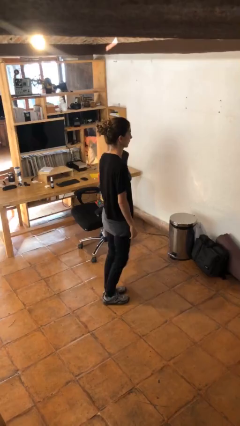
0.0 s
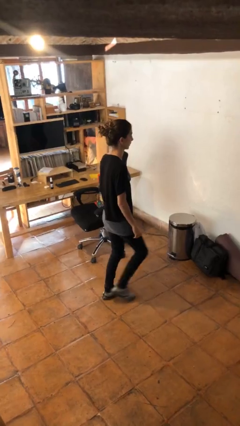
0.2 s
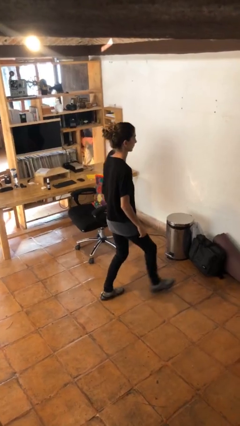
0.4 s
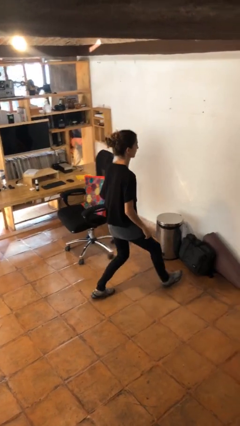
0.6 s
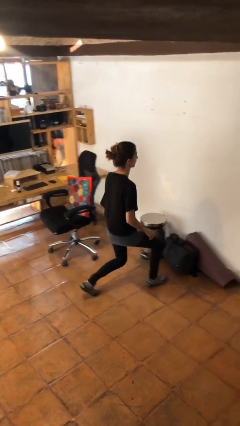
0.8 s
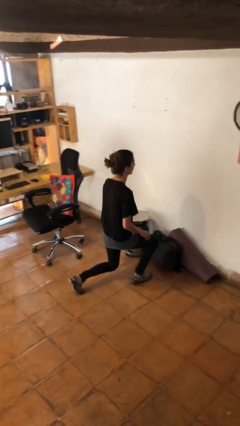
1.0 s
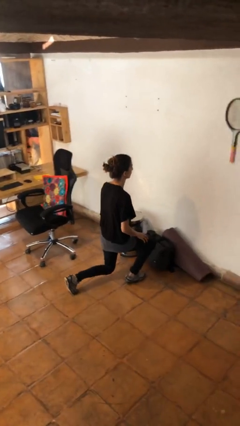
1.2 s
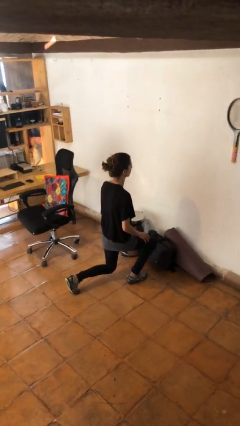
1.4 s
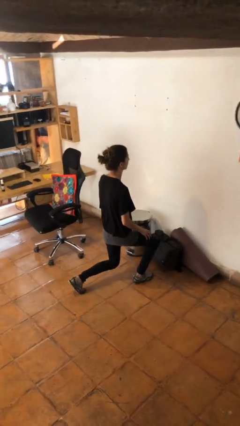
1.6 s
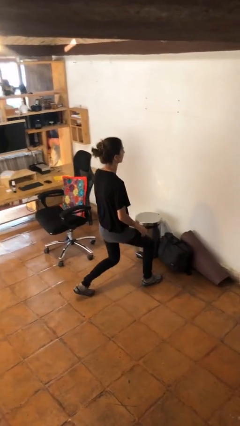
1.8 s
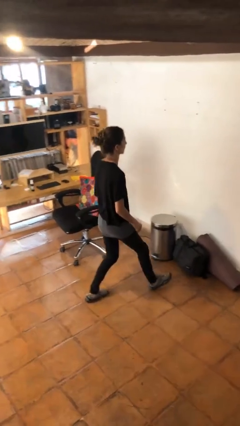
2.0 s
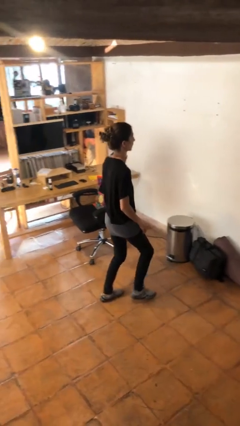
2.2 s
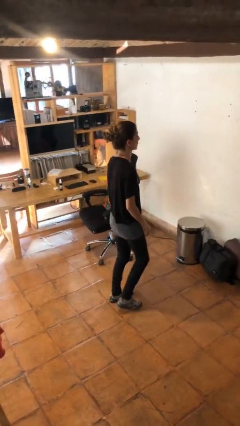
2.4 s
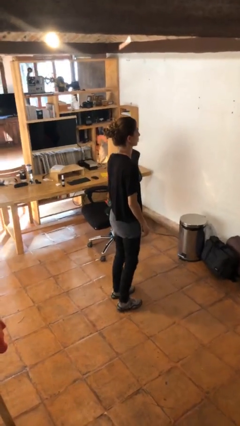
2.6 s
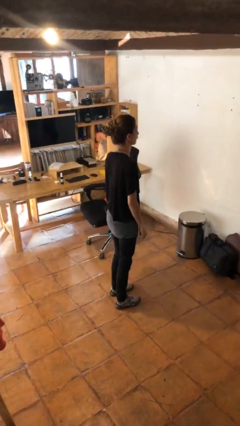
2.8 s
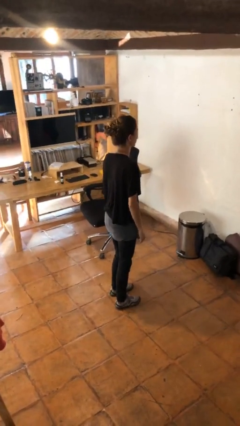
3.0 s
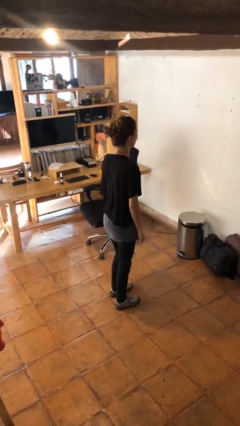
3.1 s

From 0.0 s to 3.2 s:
person exercises with lunges

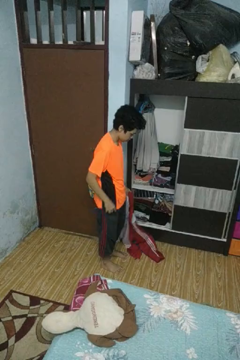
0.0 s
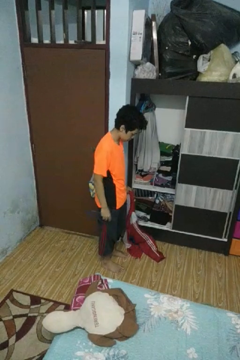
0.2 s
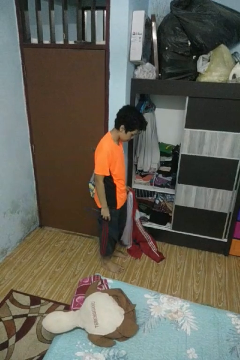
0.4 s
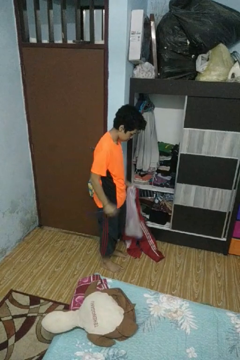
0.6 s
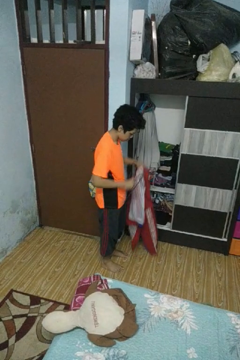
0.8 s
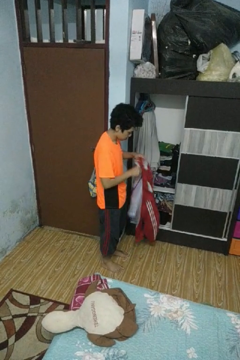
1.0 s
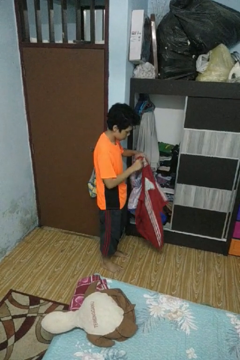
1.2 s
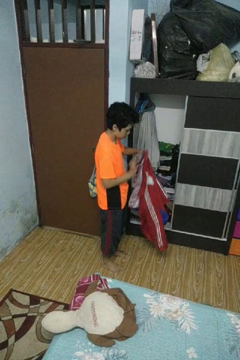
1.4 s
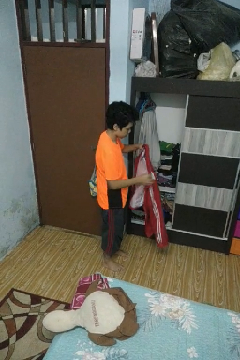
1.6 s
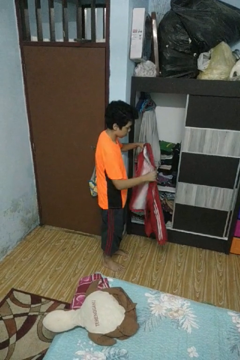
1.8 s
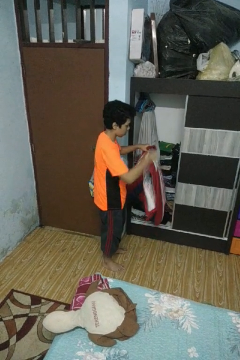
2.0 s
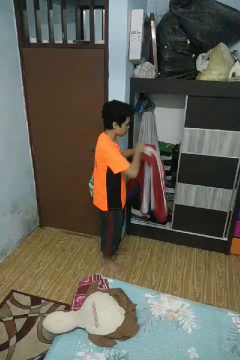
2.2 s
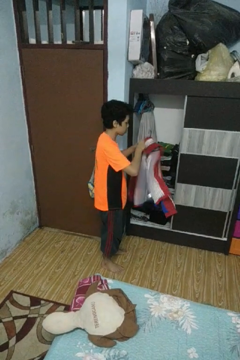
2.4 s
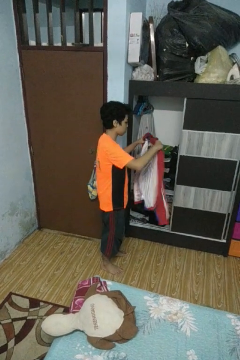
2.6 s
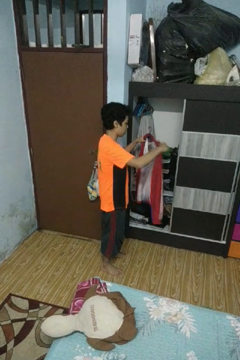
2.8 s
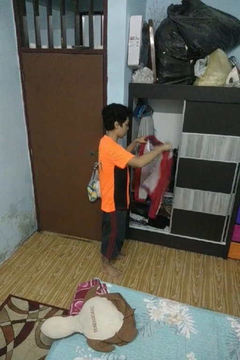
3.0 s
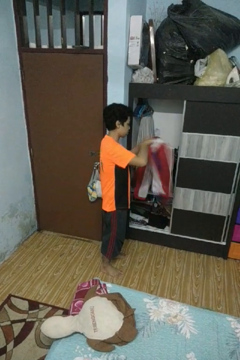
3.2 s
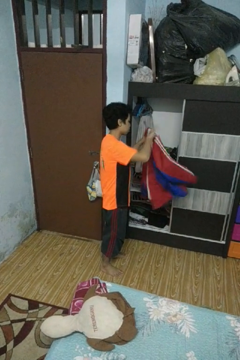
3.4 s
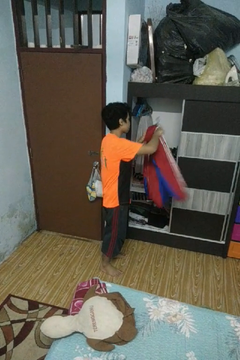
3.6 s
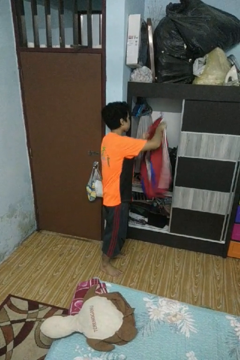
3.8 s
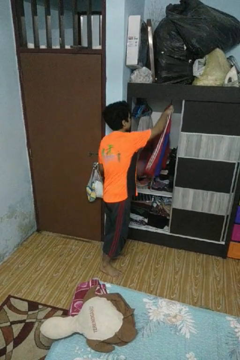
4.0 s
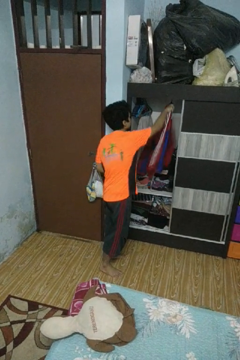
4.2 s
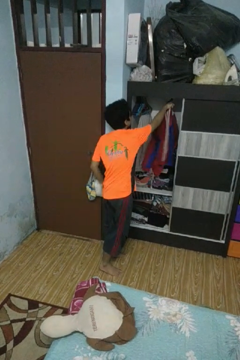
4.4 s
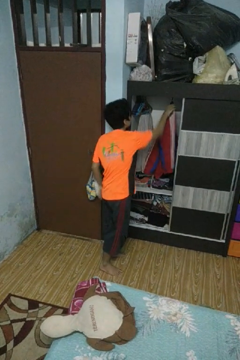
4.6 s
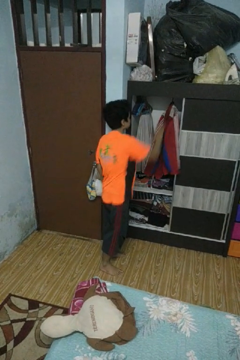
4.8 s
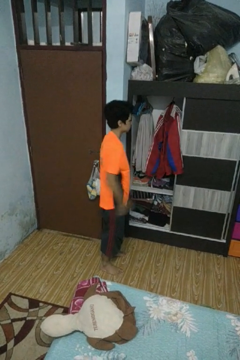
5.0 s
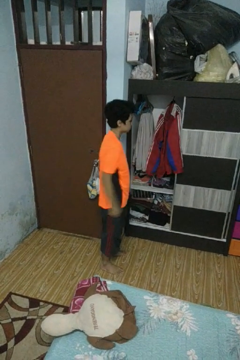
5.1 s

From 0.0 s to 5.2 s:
person puts clothes into closet

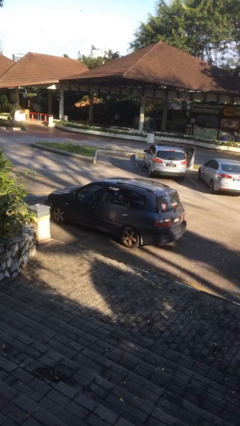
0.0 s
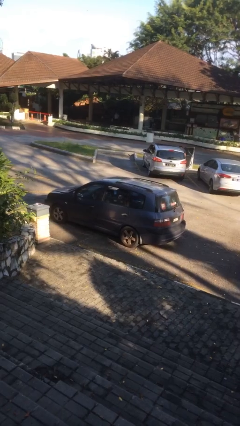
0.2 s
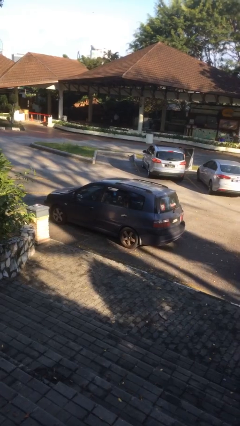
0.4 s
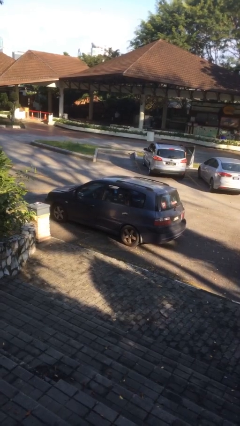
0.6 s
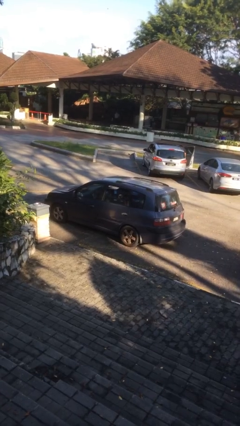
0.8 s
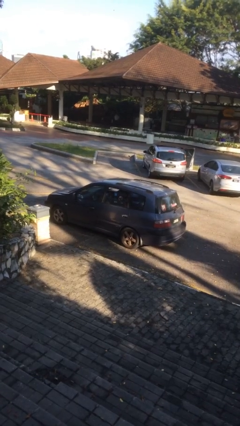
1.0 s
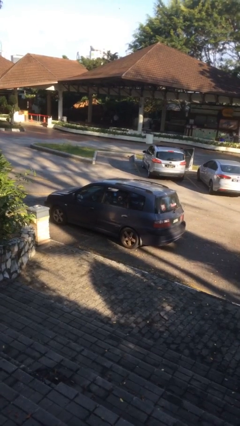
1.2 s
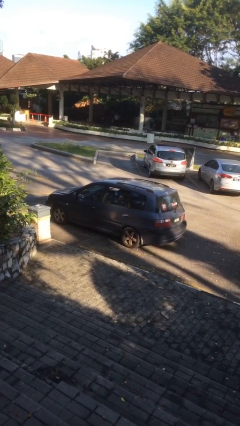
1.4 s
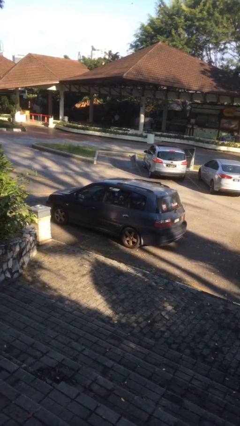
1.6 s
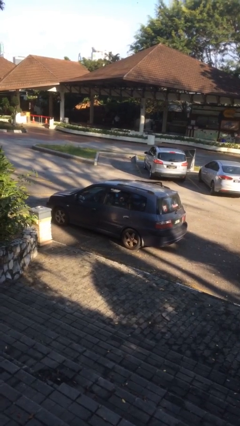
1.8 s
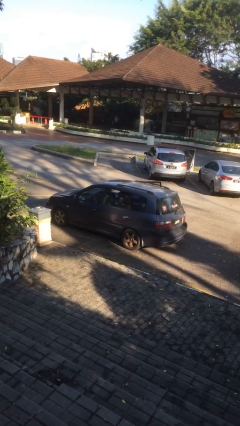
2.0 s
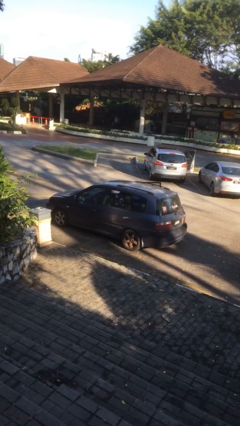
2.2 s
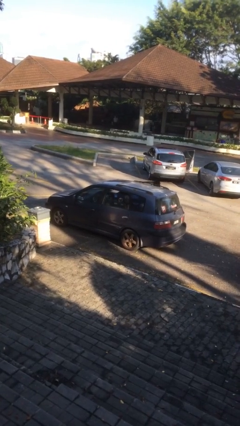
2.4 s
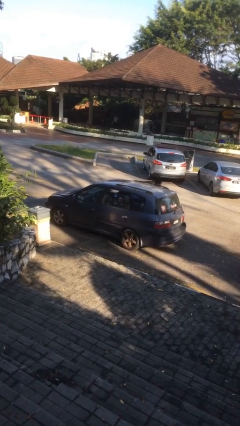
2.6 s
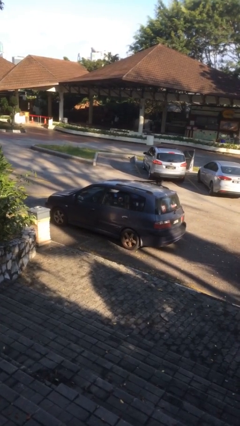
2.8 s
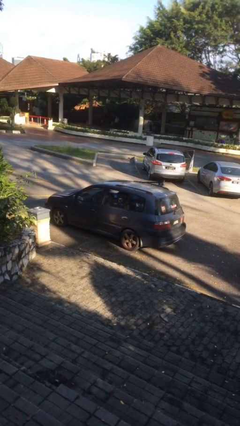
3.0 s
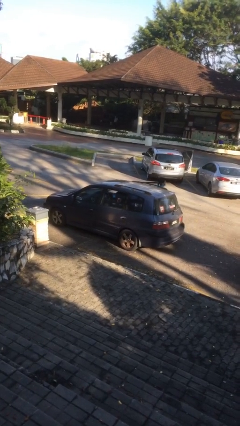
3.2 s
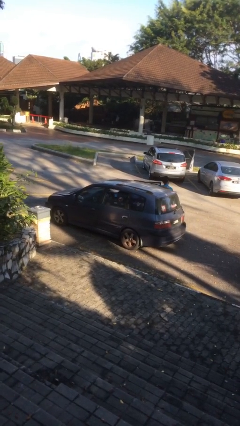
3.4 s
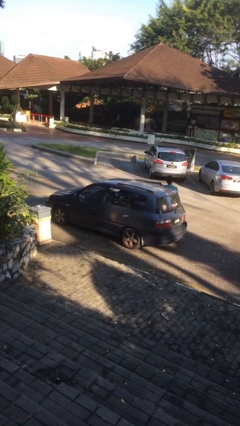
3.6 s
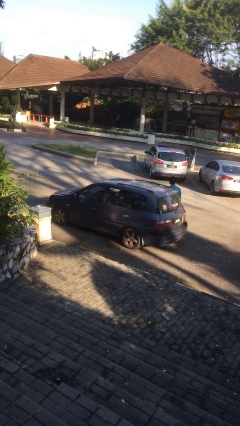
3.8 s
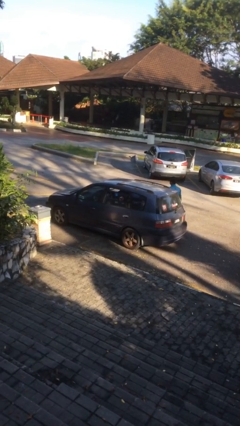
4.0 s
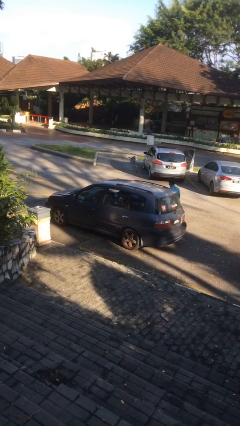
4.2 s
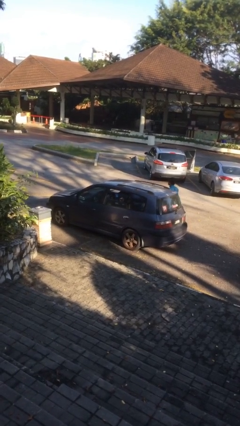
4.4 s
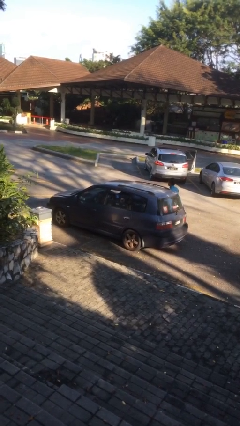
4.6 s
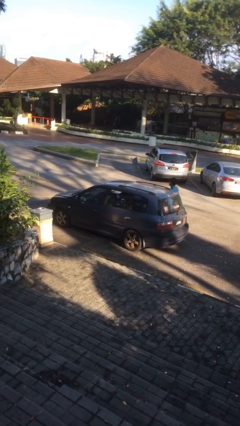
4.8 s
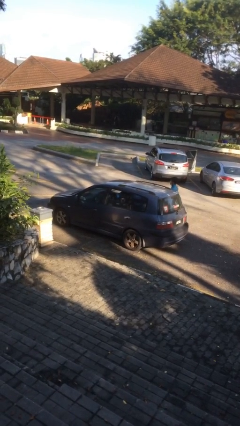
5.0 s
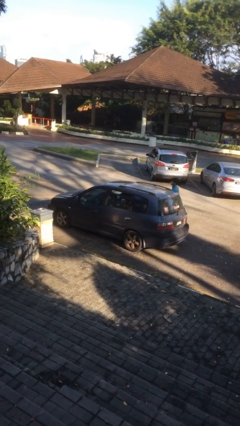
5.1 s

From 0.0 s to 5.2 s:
car drops off person

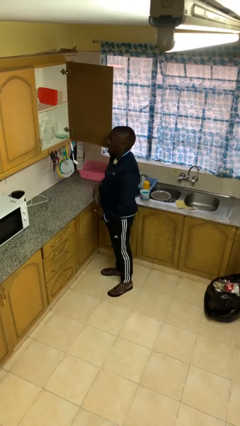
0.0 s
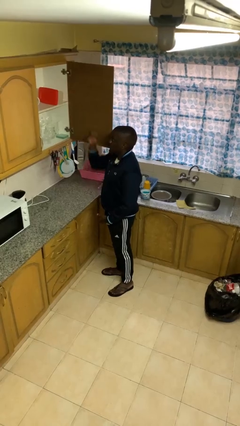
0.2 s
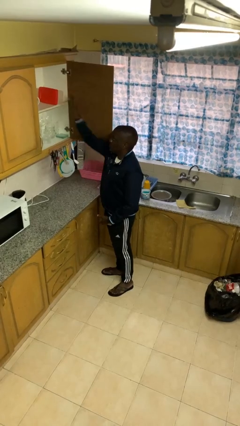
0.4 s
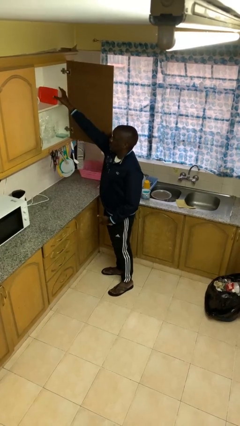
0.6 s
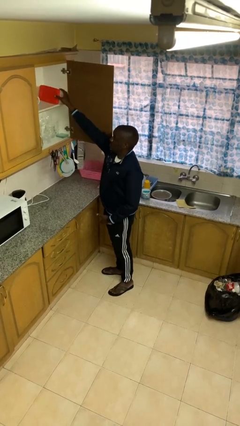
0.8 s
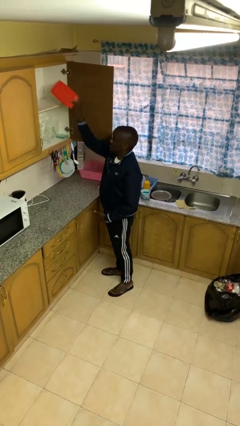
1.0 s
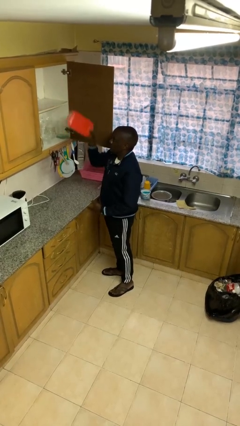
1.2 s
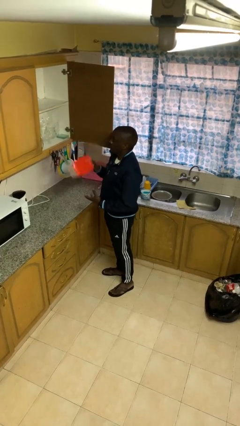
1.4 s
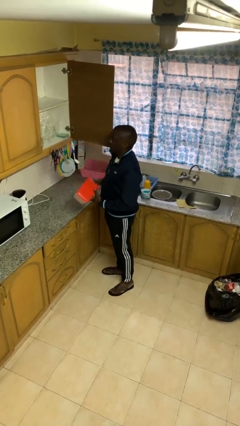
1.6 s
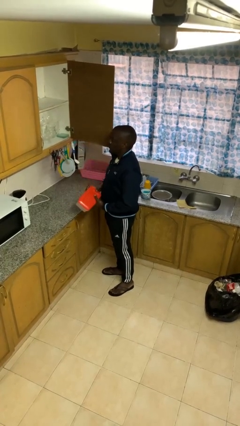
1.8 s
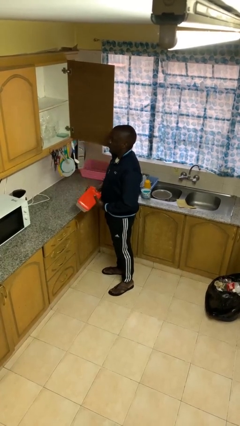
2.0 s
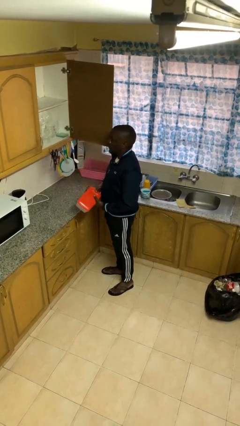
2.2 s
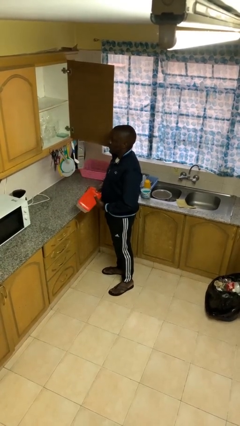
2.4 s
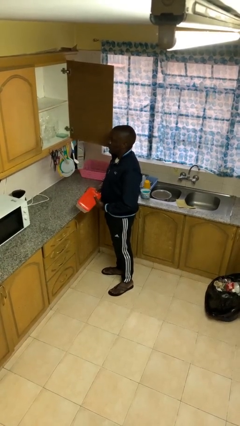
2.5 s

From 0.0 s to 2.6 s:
person picks up object from shelf

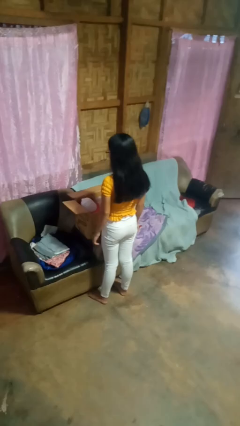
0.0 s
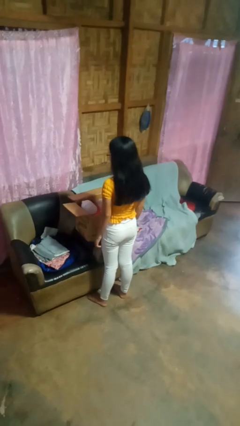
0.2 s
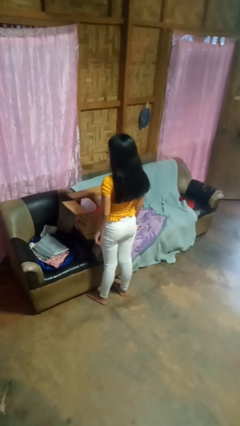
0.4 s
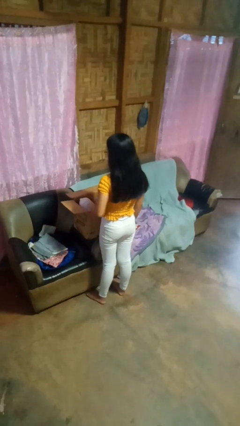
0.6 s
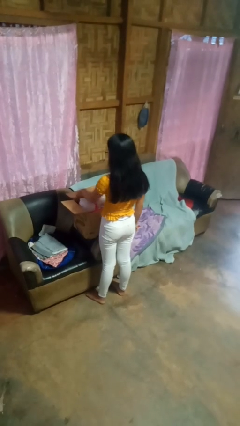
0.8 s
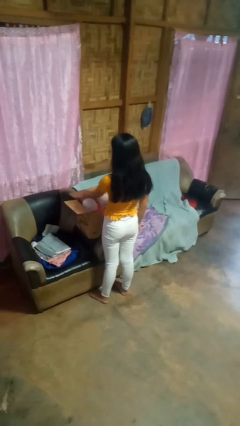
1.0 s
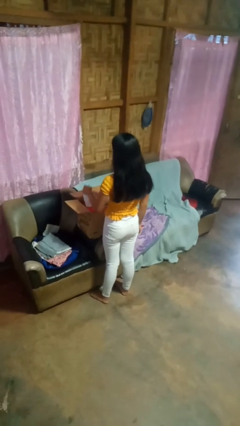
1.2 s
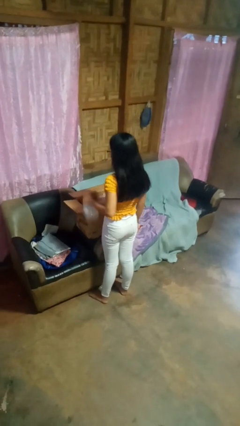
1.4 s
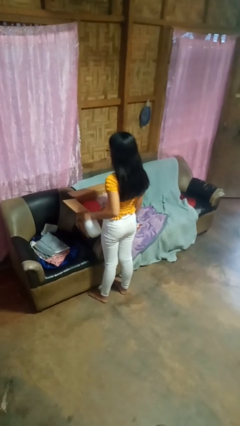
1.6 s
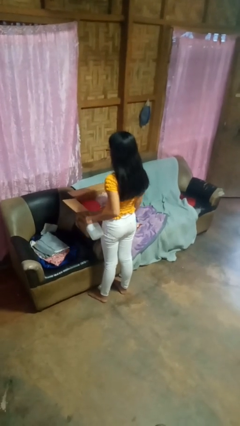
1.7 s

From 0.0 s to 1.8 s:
person takes object from box

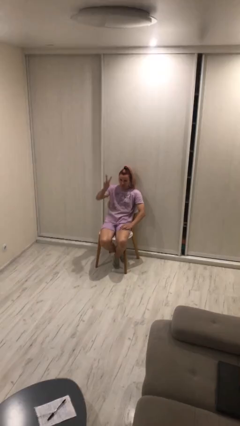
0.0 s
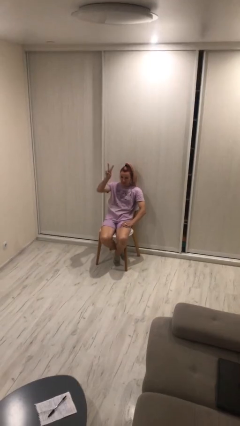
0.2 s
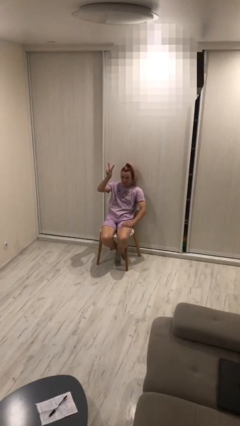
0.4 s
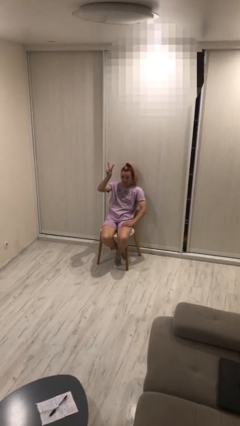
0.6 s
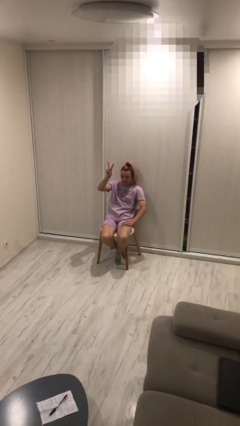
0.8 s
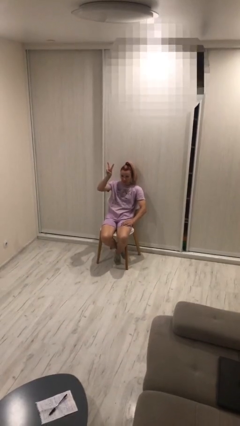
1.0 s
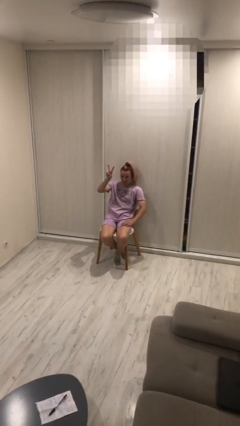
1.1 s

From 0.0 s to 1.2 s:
person gestures peace
